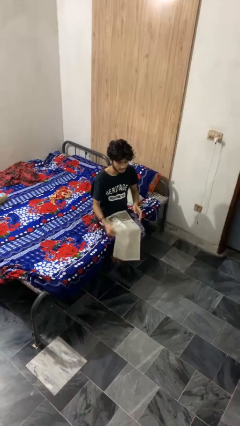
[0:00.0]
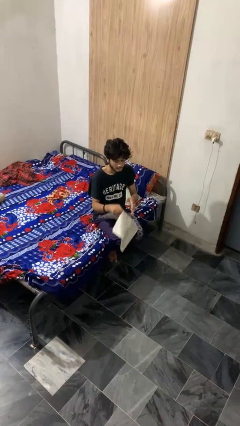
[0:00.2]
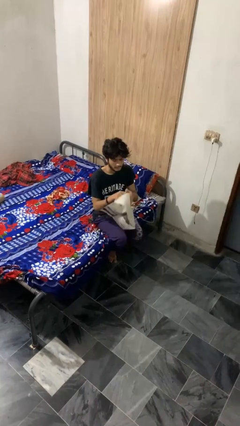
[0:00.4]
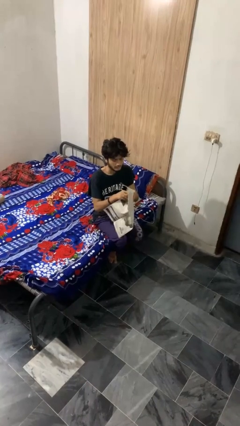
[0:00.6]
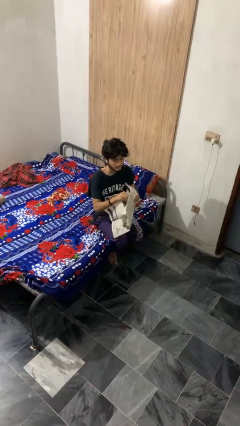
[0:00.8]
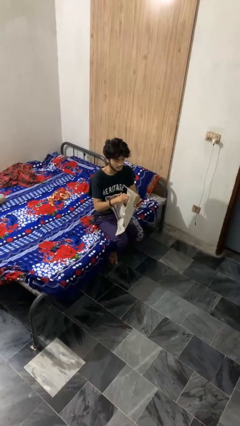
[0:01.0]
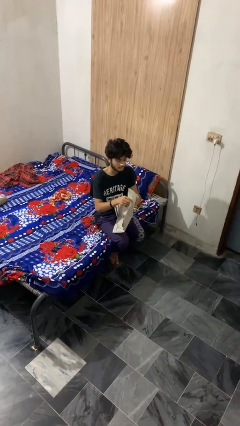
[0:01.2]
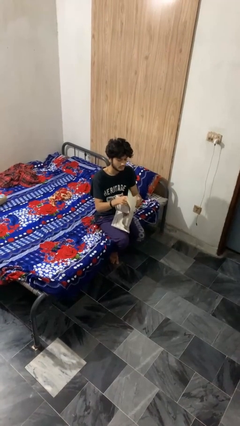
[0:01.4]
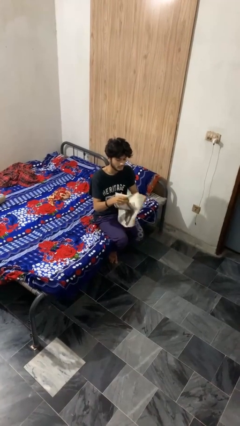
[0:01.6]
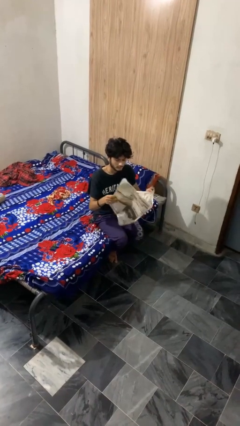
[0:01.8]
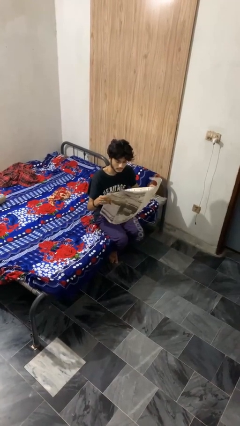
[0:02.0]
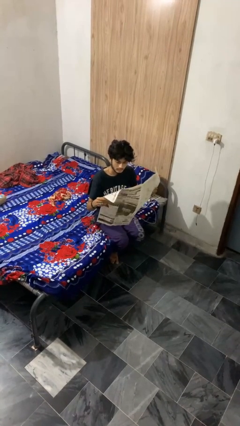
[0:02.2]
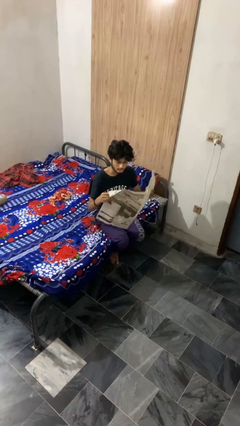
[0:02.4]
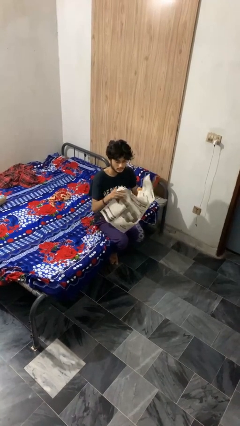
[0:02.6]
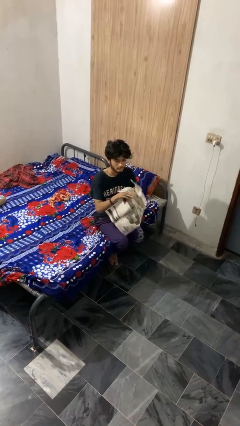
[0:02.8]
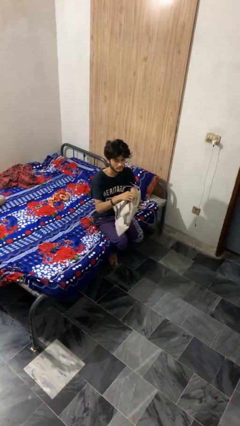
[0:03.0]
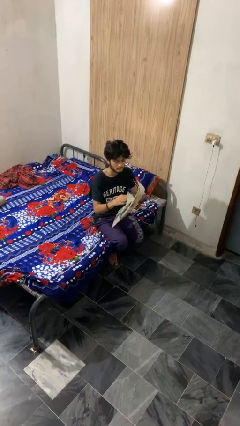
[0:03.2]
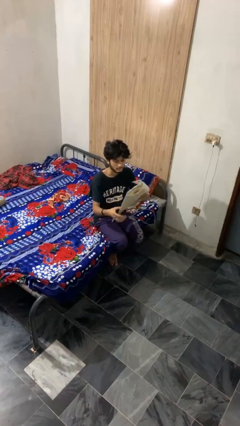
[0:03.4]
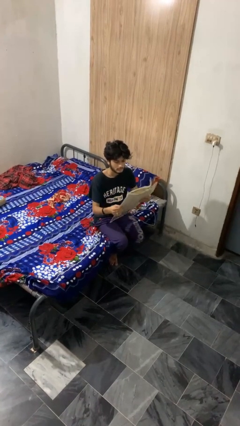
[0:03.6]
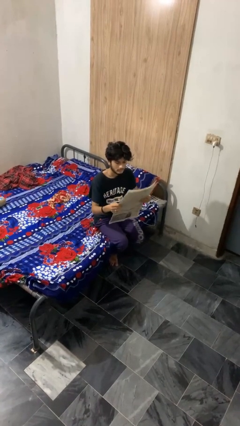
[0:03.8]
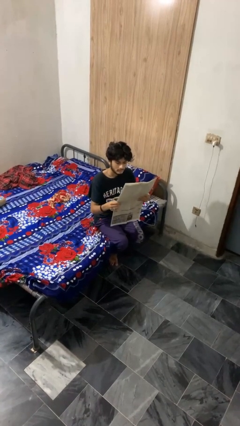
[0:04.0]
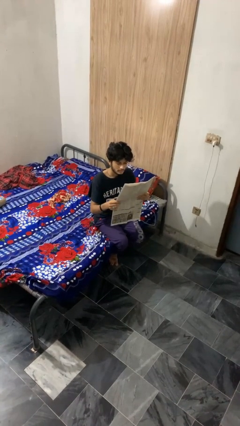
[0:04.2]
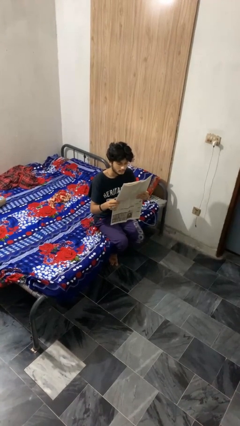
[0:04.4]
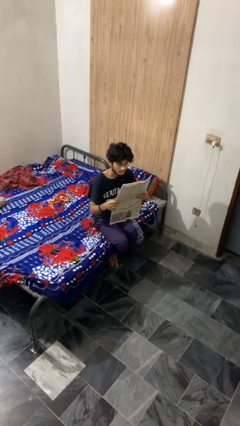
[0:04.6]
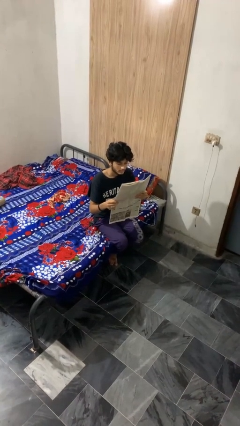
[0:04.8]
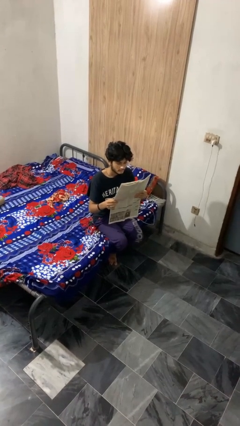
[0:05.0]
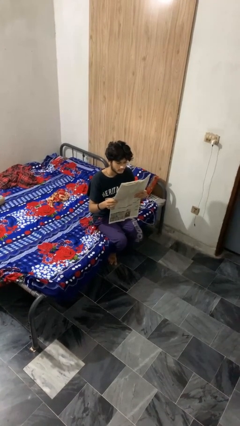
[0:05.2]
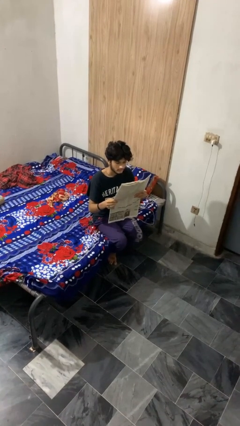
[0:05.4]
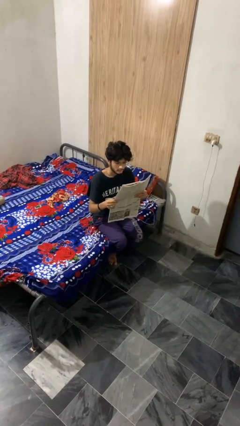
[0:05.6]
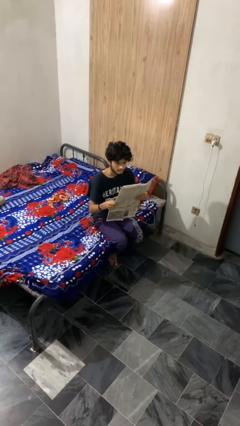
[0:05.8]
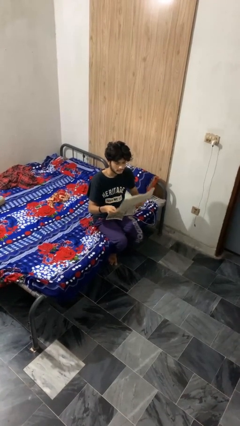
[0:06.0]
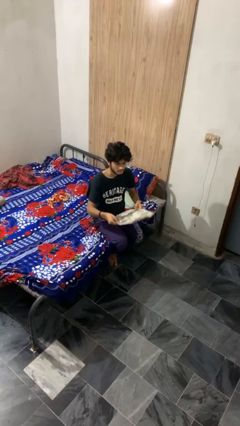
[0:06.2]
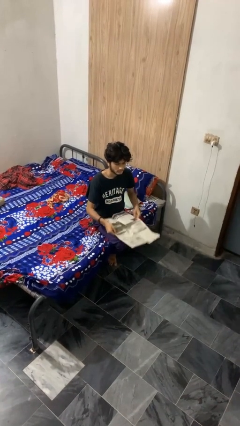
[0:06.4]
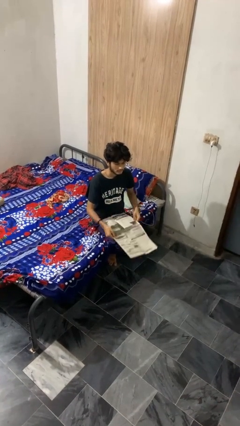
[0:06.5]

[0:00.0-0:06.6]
person reads newspaper

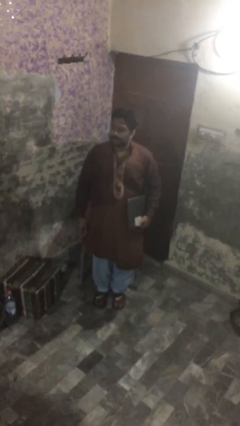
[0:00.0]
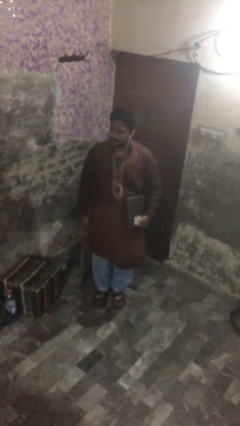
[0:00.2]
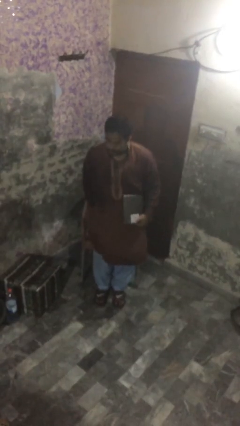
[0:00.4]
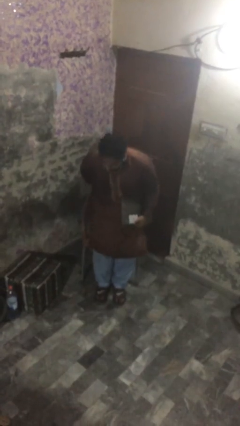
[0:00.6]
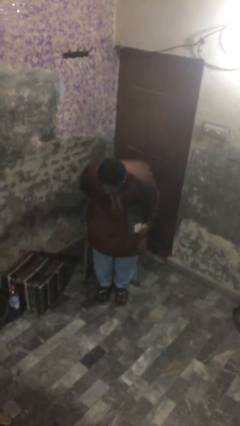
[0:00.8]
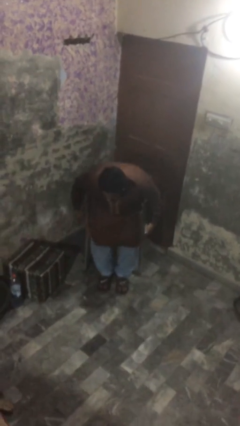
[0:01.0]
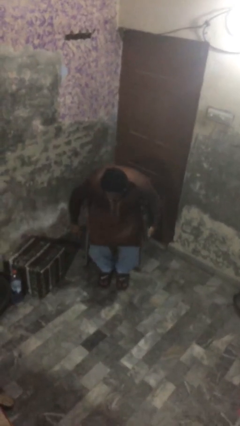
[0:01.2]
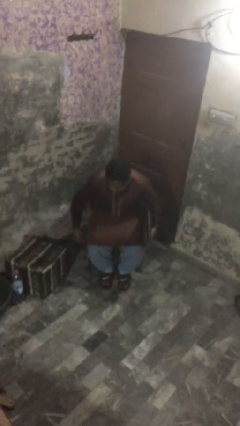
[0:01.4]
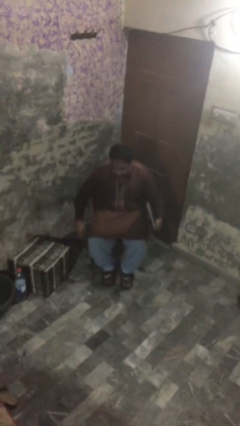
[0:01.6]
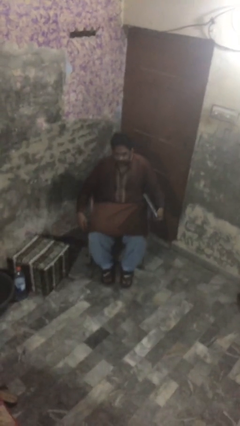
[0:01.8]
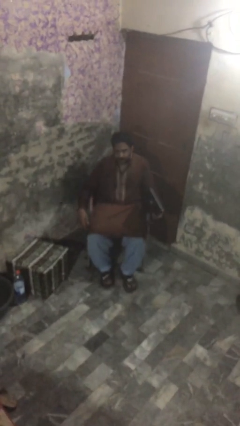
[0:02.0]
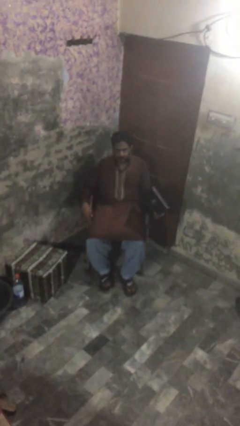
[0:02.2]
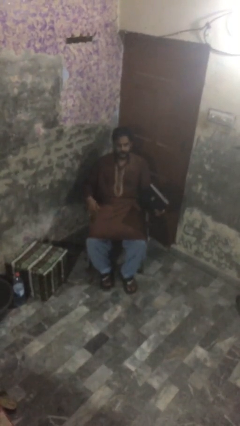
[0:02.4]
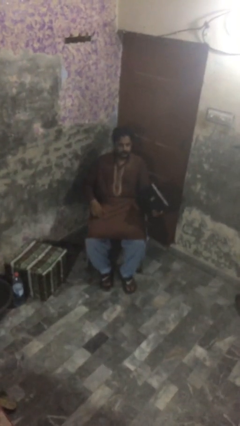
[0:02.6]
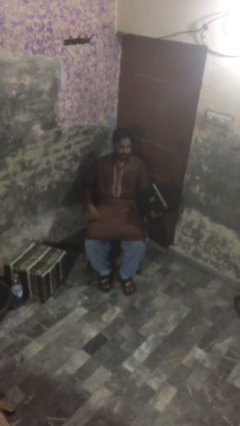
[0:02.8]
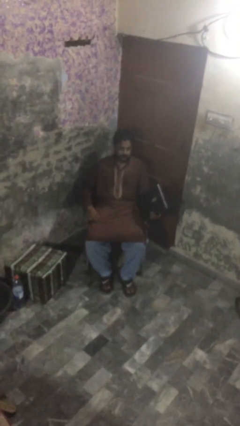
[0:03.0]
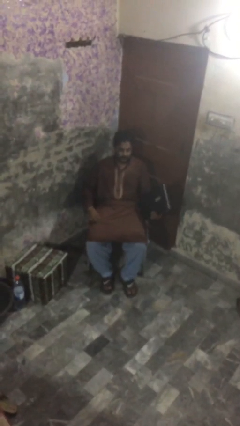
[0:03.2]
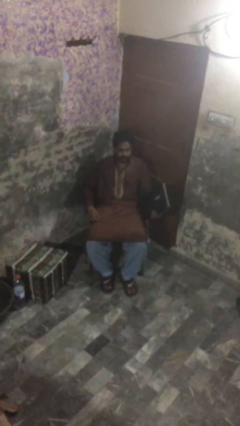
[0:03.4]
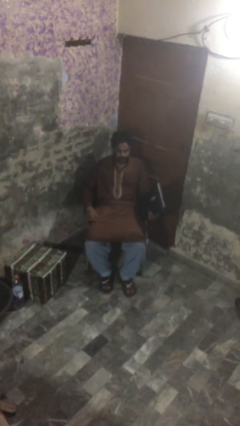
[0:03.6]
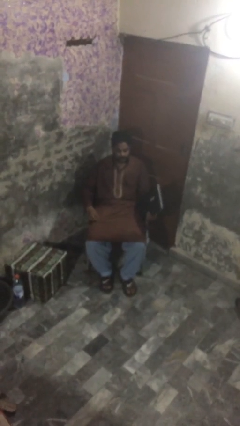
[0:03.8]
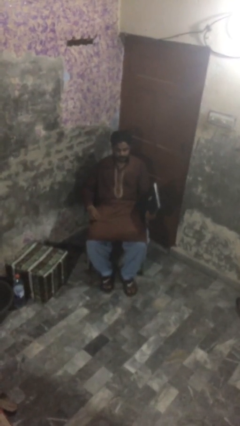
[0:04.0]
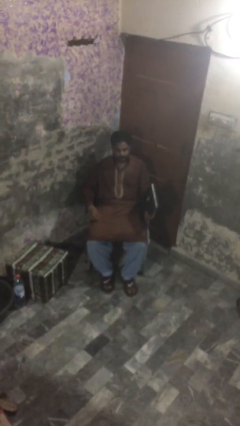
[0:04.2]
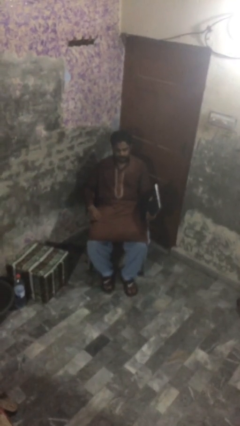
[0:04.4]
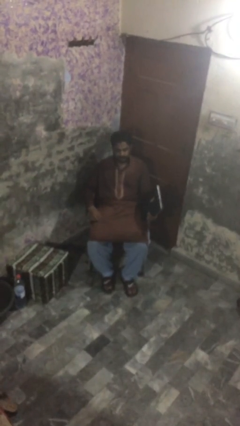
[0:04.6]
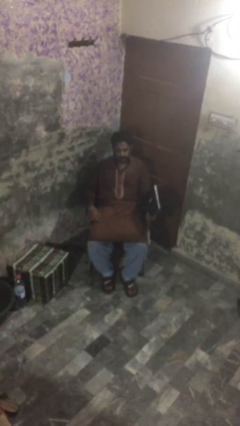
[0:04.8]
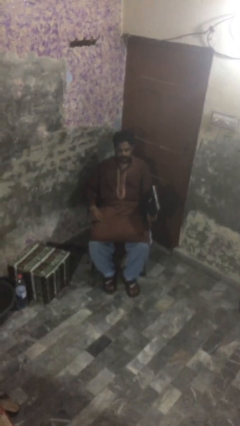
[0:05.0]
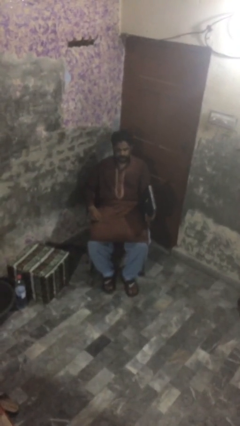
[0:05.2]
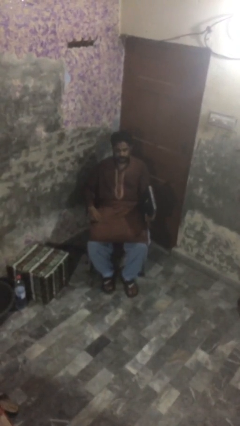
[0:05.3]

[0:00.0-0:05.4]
person sits down

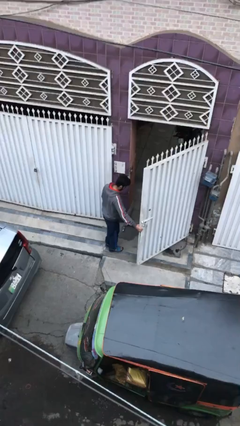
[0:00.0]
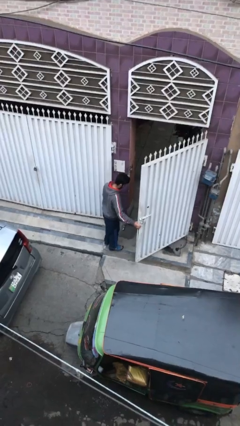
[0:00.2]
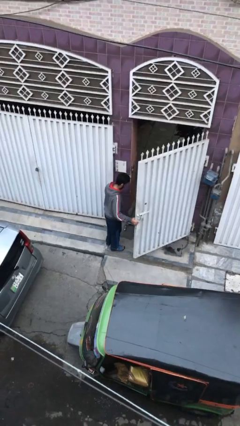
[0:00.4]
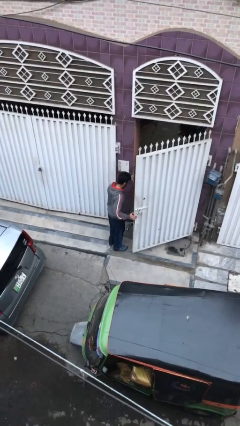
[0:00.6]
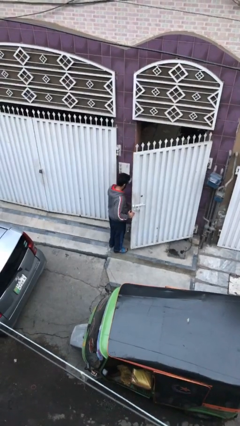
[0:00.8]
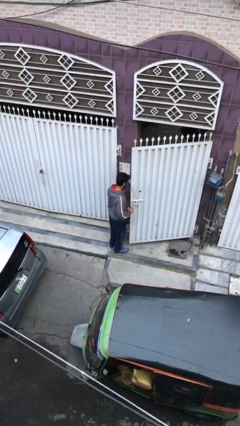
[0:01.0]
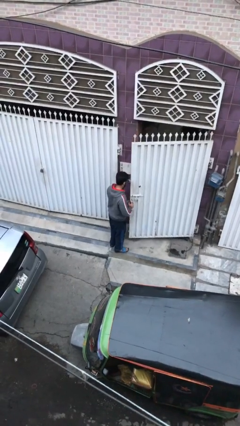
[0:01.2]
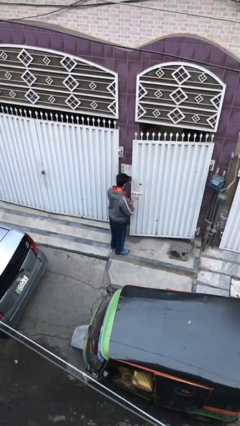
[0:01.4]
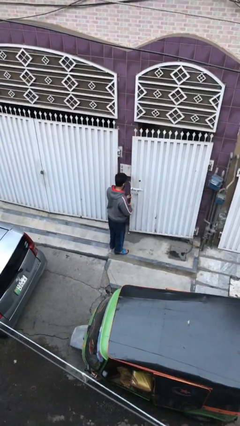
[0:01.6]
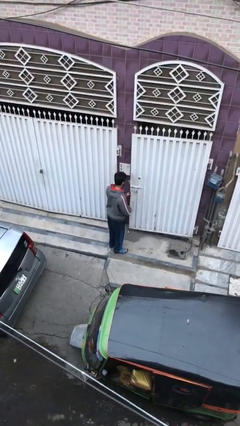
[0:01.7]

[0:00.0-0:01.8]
person closes facility door

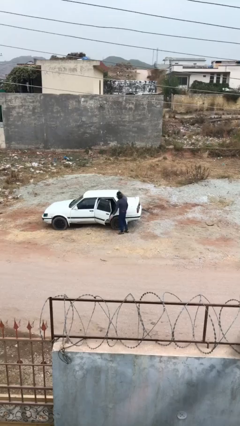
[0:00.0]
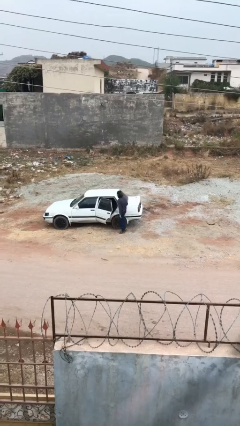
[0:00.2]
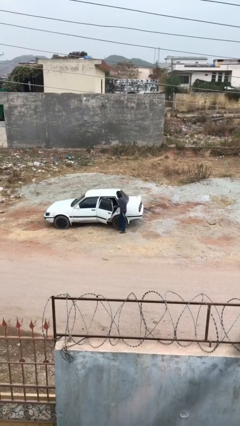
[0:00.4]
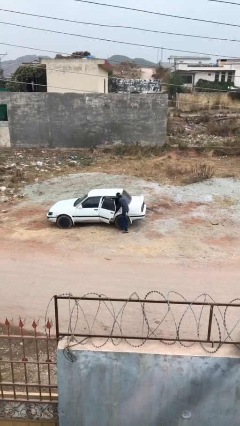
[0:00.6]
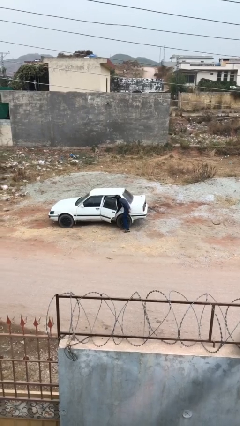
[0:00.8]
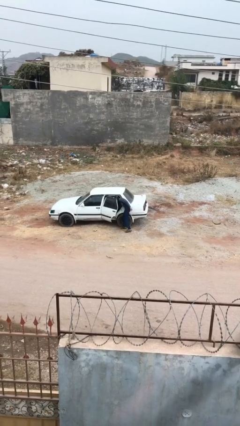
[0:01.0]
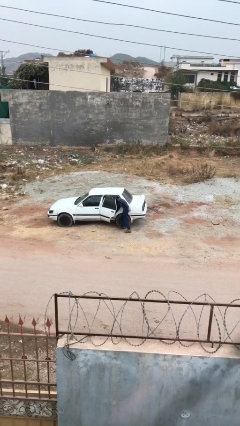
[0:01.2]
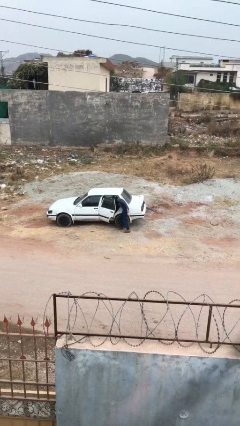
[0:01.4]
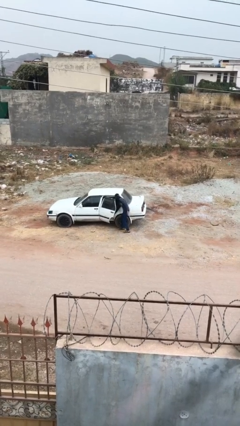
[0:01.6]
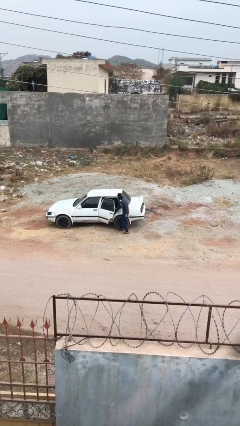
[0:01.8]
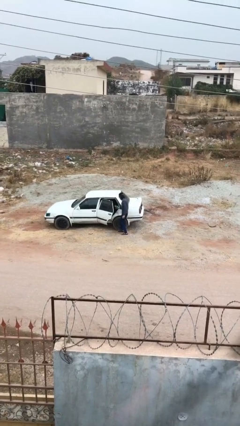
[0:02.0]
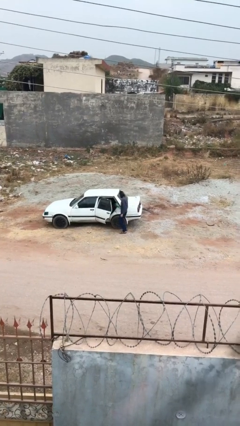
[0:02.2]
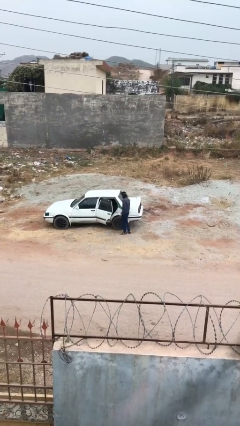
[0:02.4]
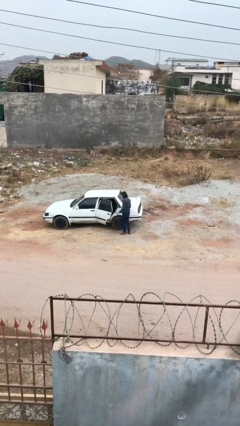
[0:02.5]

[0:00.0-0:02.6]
person unloads car

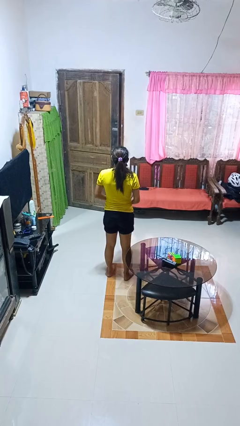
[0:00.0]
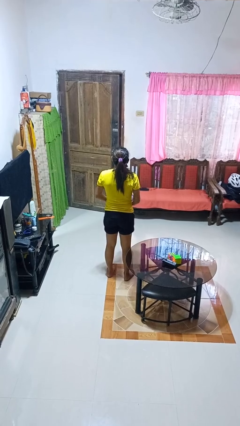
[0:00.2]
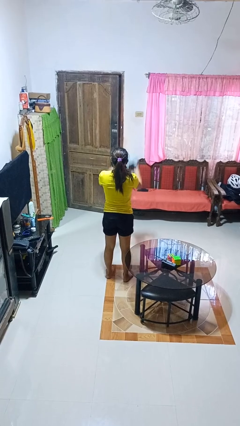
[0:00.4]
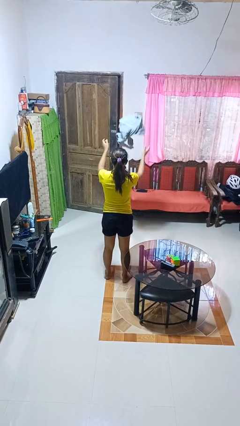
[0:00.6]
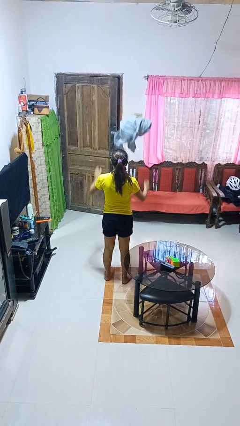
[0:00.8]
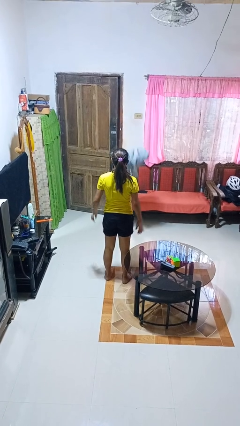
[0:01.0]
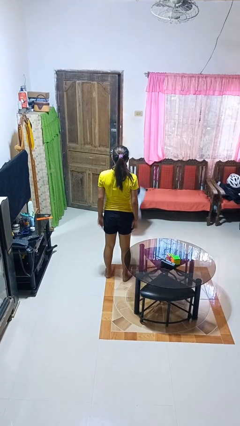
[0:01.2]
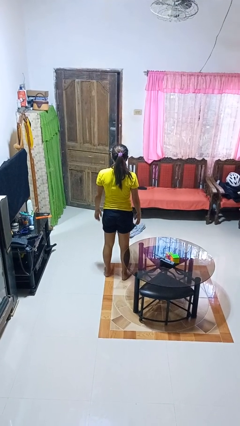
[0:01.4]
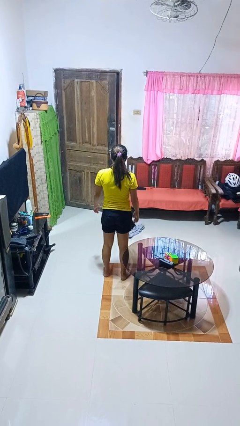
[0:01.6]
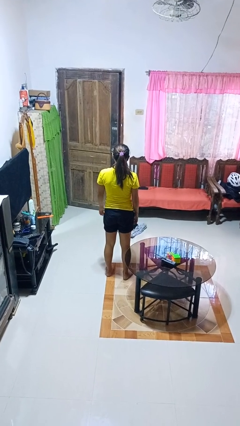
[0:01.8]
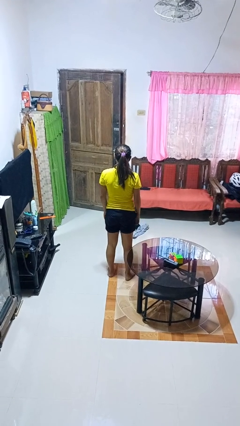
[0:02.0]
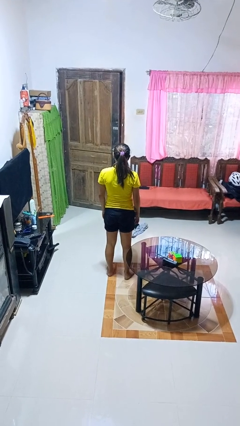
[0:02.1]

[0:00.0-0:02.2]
person throws object into air
